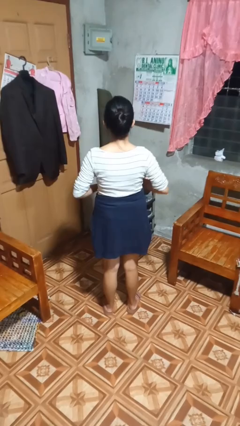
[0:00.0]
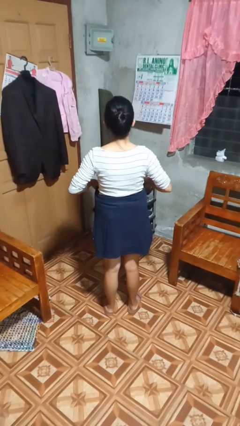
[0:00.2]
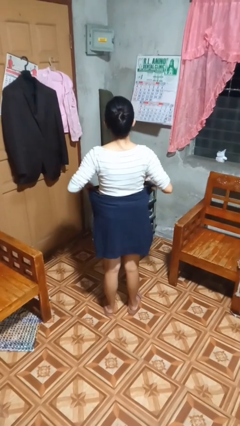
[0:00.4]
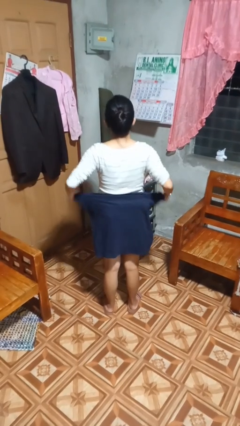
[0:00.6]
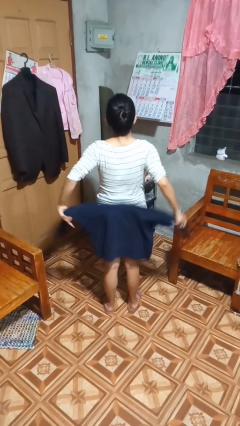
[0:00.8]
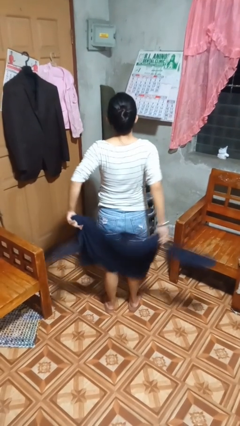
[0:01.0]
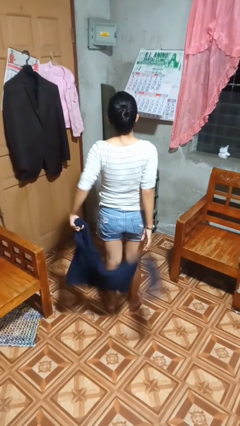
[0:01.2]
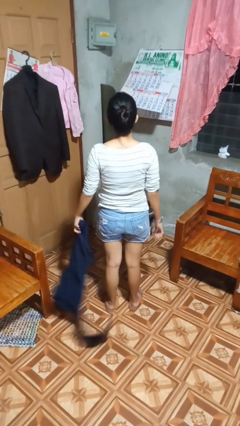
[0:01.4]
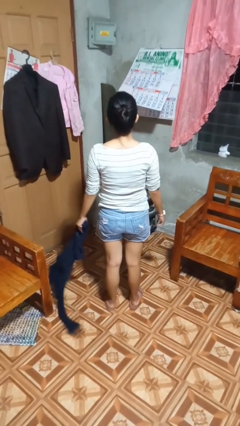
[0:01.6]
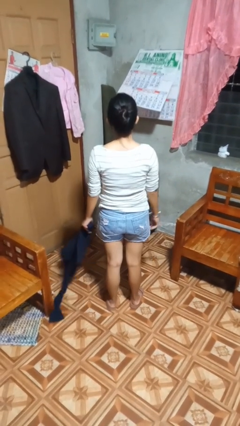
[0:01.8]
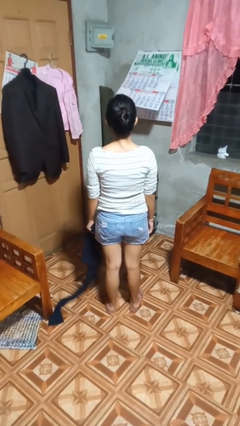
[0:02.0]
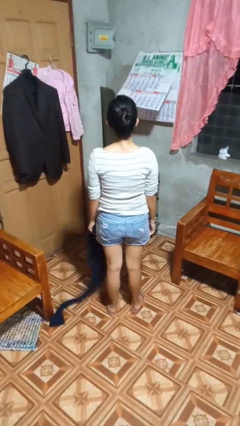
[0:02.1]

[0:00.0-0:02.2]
person unties jacket around waist

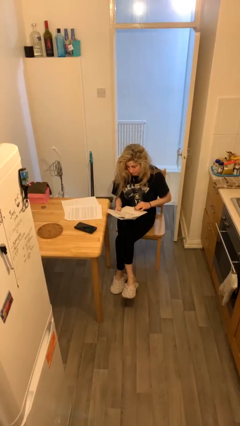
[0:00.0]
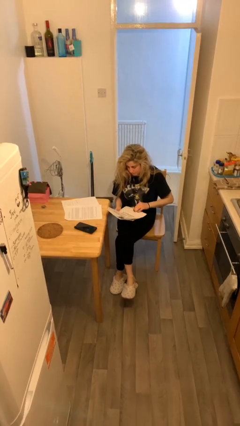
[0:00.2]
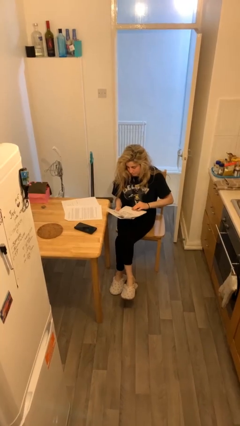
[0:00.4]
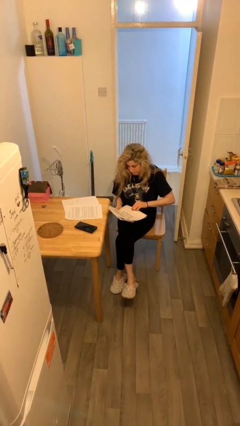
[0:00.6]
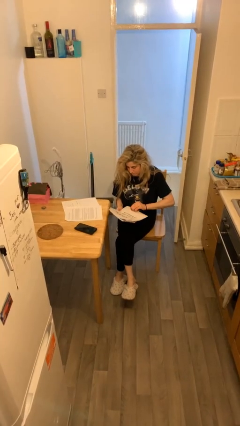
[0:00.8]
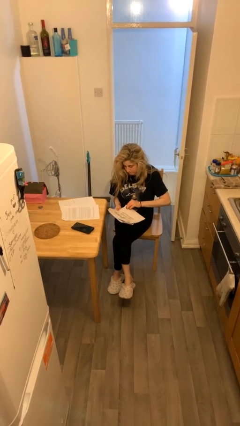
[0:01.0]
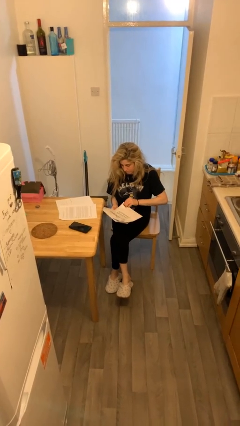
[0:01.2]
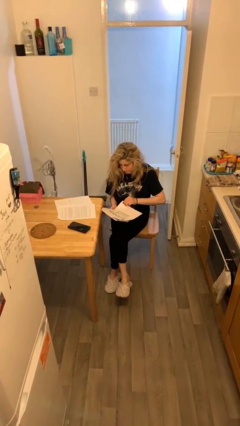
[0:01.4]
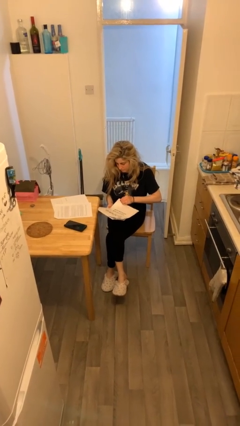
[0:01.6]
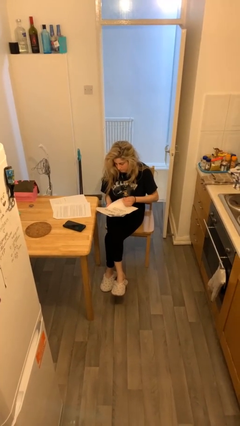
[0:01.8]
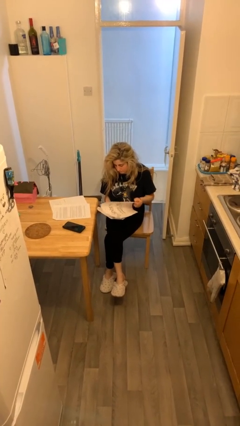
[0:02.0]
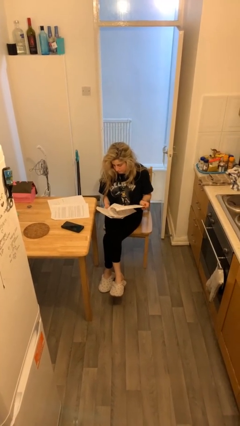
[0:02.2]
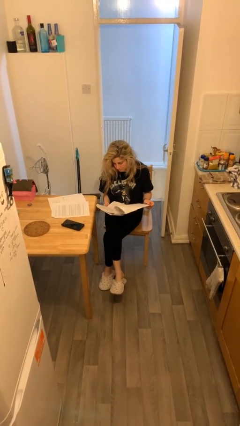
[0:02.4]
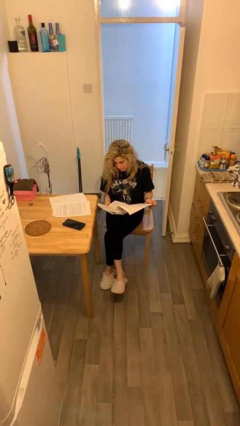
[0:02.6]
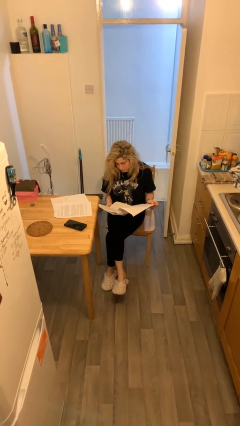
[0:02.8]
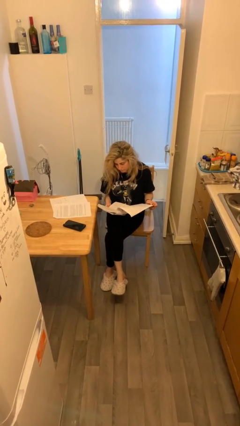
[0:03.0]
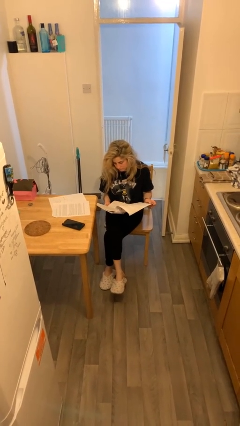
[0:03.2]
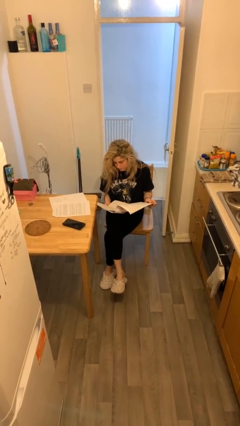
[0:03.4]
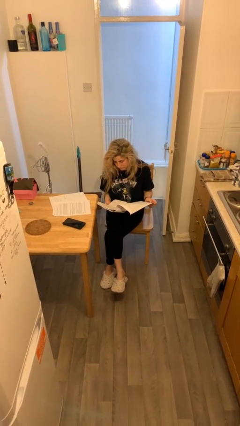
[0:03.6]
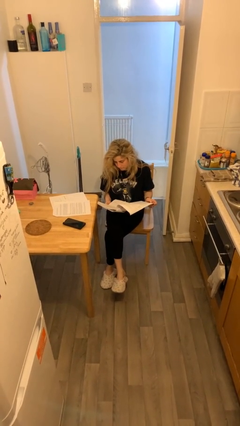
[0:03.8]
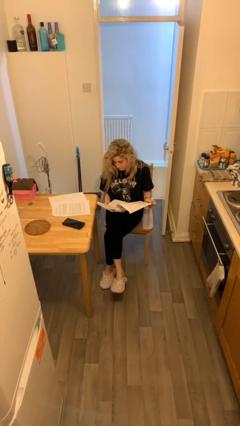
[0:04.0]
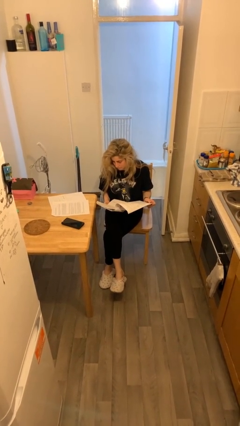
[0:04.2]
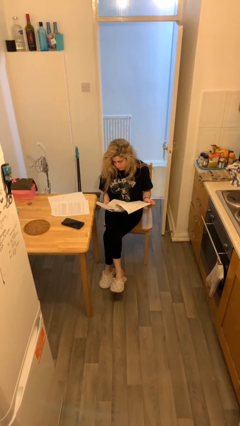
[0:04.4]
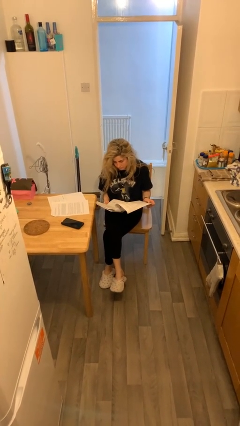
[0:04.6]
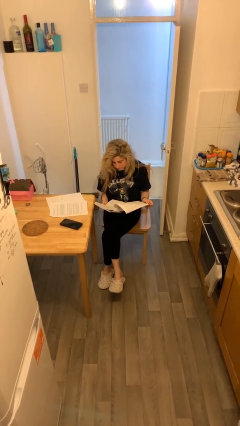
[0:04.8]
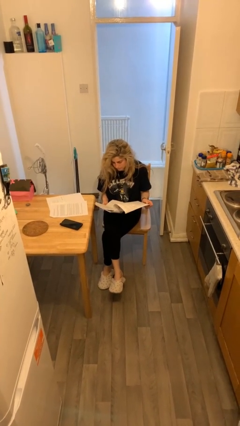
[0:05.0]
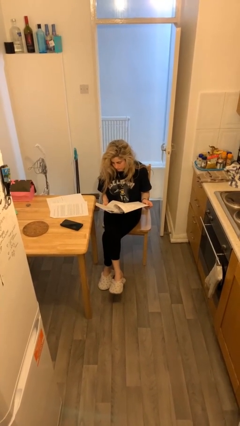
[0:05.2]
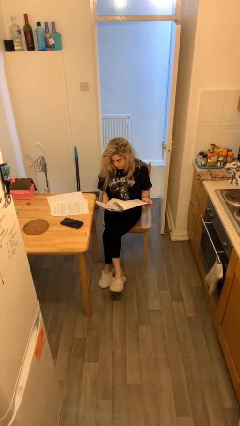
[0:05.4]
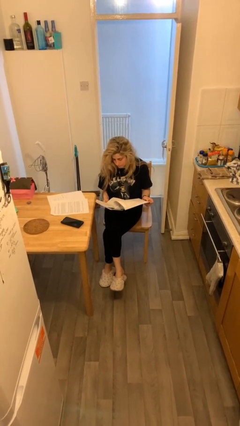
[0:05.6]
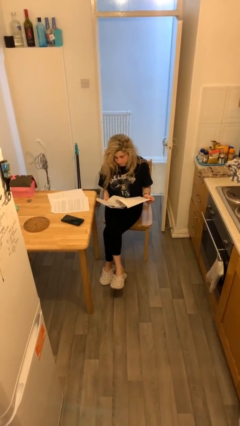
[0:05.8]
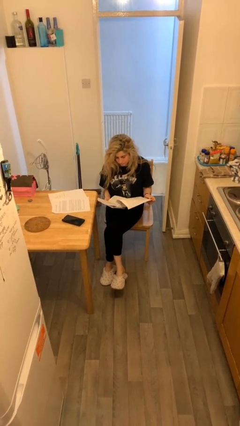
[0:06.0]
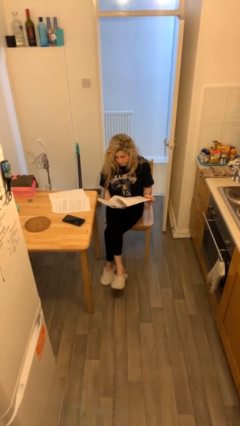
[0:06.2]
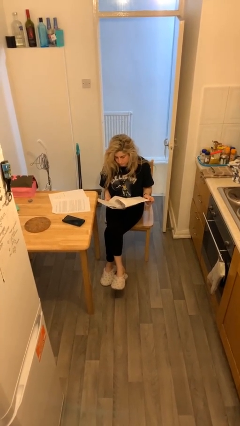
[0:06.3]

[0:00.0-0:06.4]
person reads document

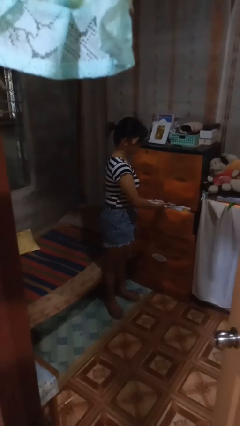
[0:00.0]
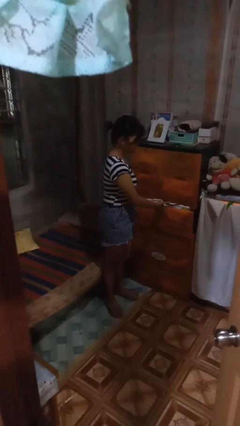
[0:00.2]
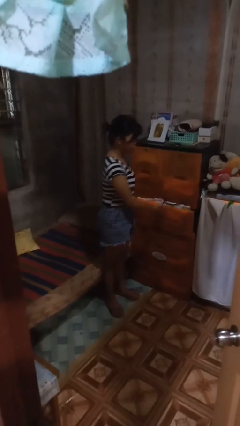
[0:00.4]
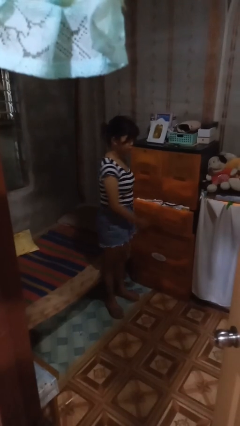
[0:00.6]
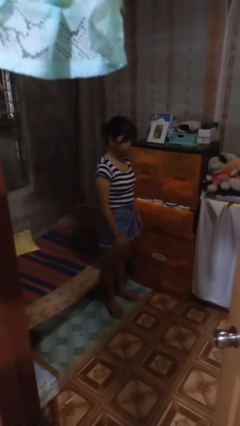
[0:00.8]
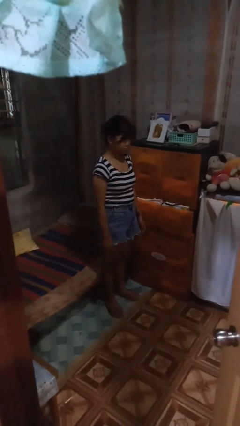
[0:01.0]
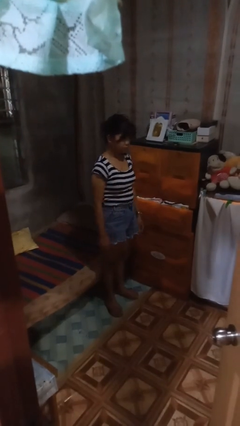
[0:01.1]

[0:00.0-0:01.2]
person closes dresser drawer

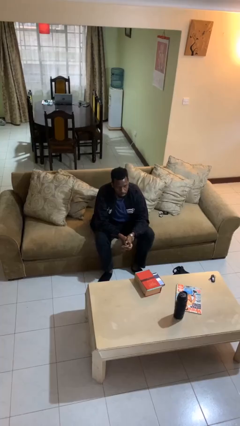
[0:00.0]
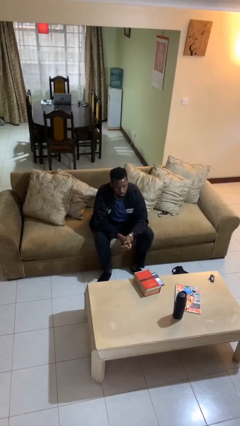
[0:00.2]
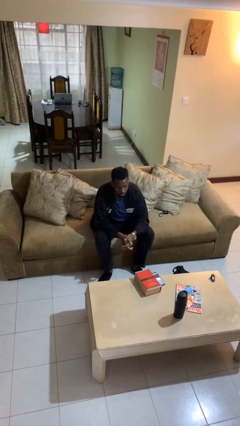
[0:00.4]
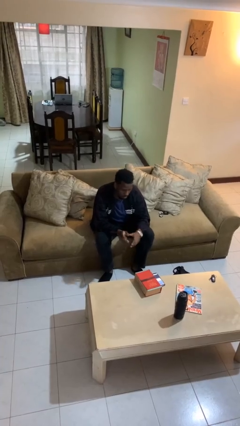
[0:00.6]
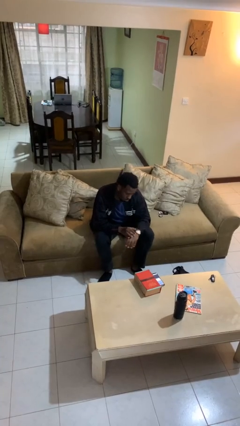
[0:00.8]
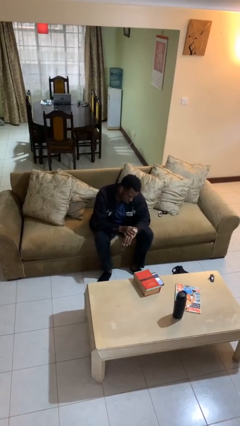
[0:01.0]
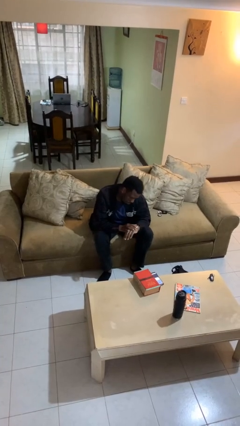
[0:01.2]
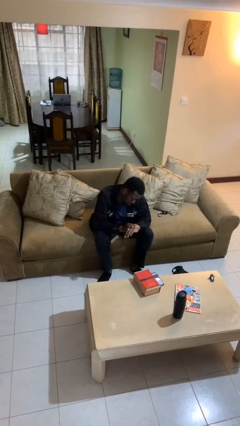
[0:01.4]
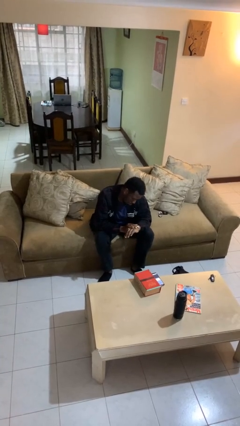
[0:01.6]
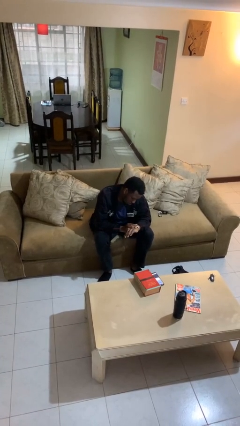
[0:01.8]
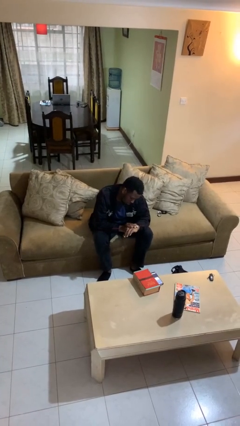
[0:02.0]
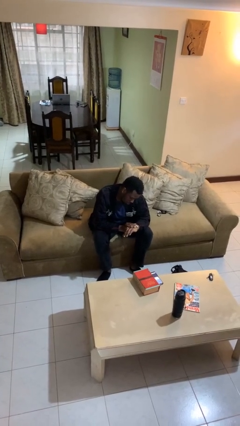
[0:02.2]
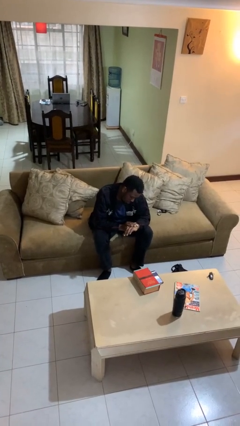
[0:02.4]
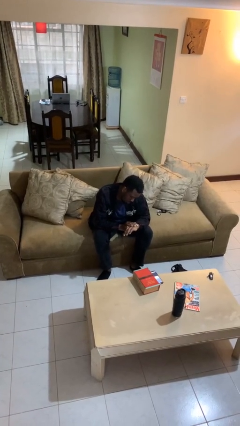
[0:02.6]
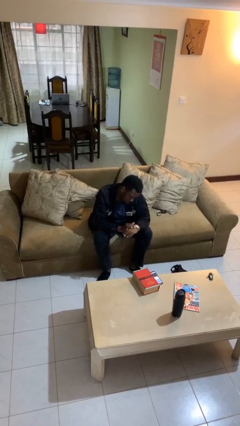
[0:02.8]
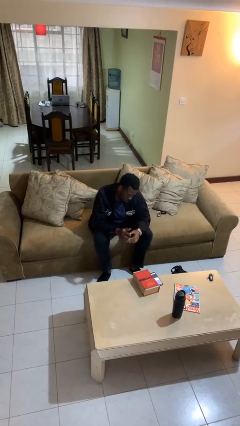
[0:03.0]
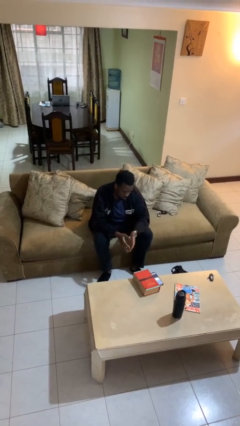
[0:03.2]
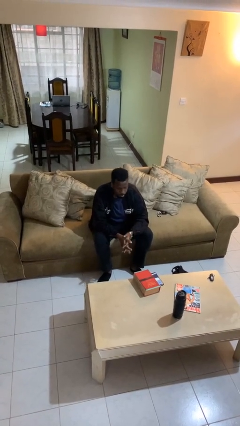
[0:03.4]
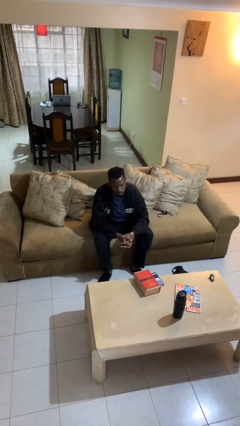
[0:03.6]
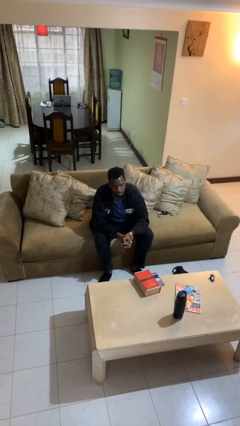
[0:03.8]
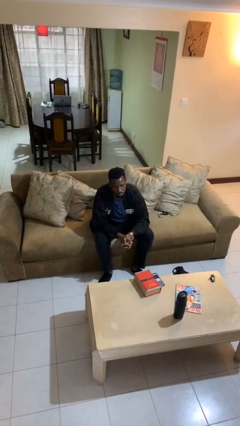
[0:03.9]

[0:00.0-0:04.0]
person looks at wristwatch

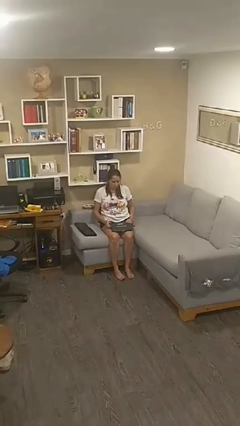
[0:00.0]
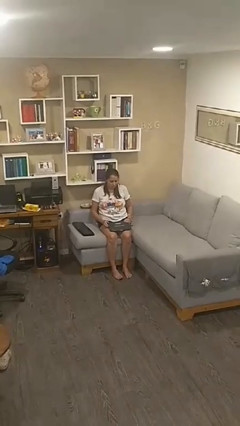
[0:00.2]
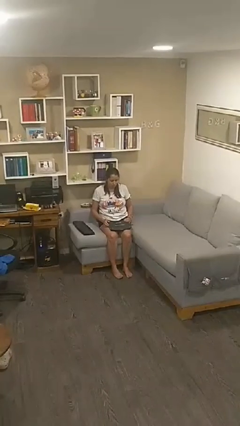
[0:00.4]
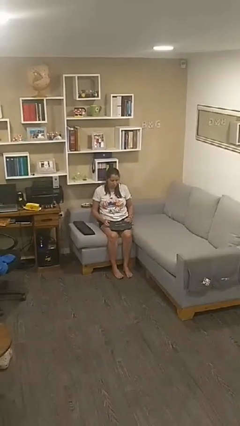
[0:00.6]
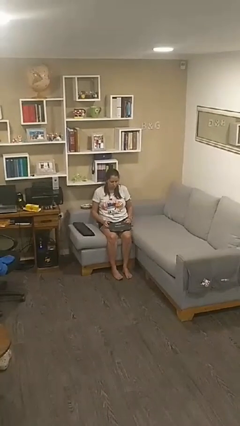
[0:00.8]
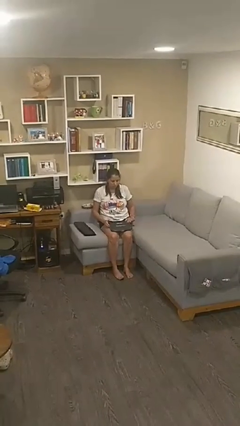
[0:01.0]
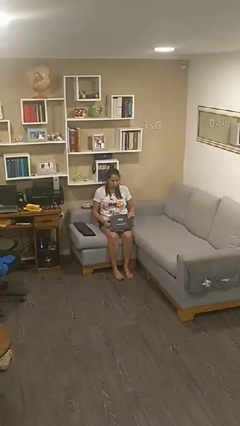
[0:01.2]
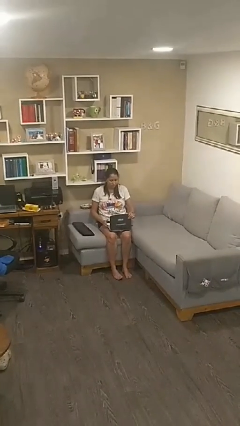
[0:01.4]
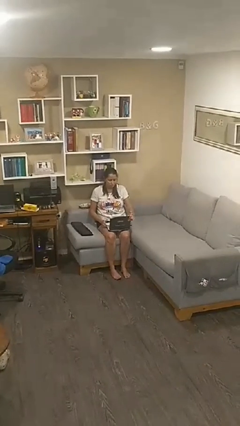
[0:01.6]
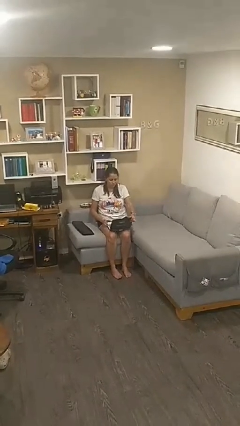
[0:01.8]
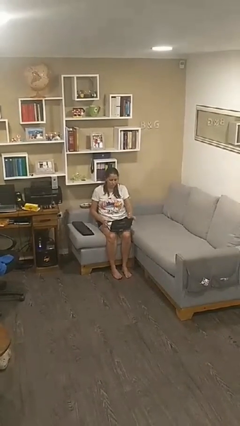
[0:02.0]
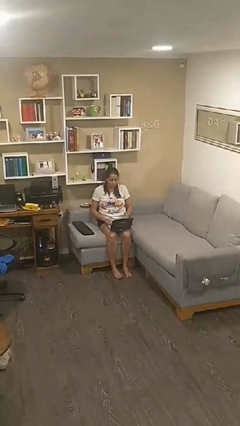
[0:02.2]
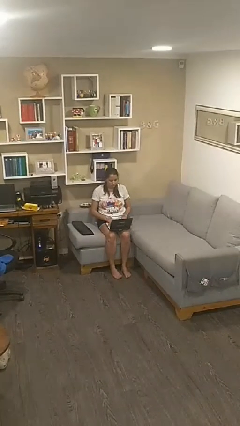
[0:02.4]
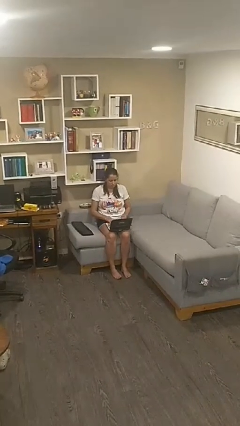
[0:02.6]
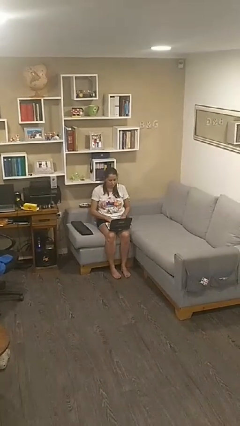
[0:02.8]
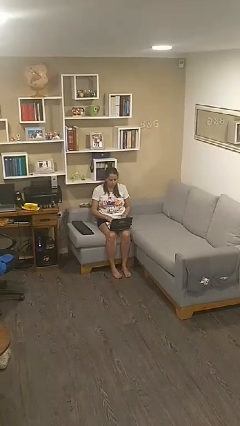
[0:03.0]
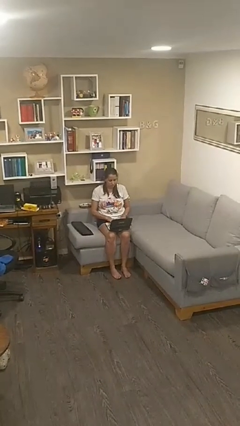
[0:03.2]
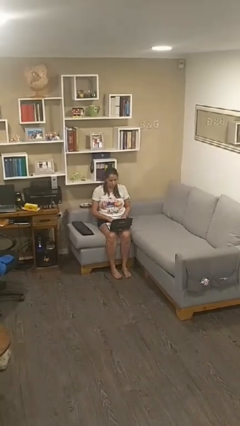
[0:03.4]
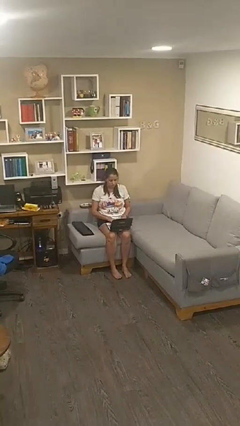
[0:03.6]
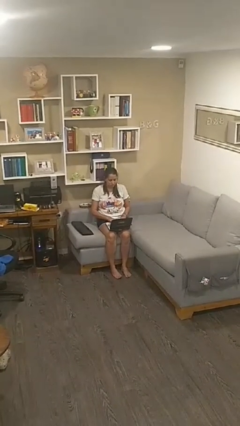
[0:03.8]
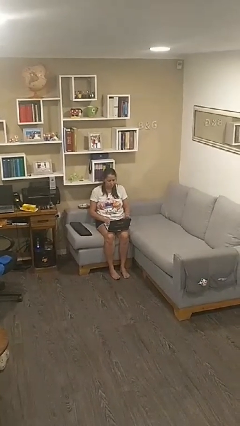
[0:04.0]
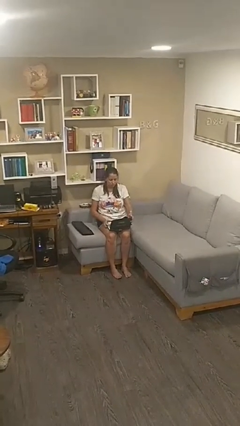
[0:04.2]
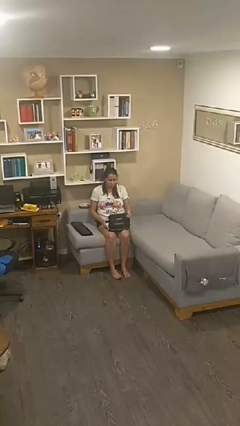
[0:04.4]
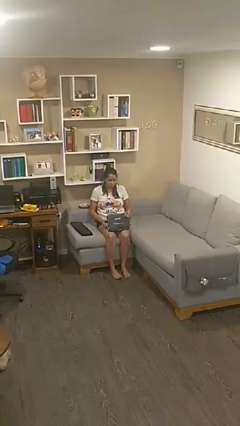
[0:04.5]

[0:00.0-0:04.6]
person interacts with laptop
